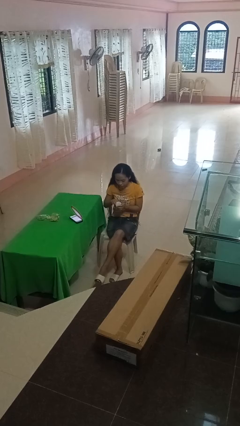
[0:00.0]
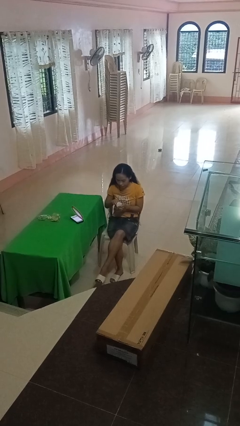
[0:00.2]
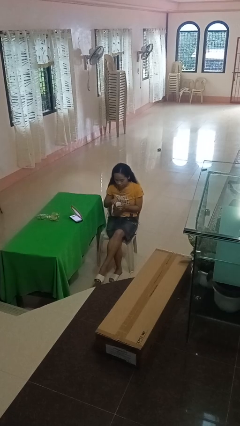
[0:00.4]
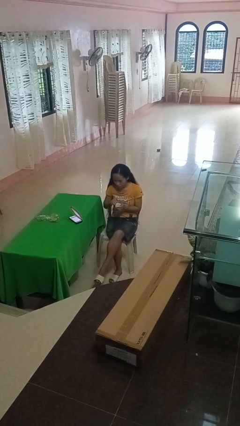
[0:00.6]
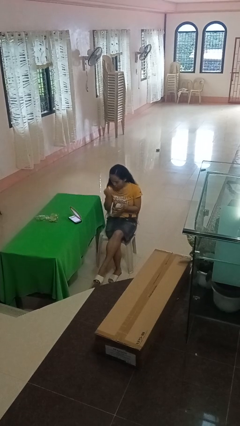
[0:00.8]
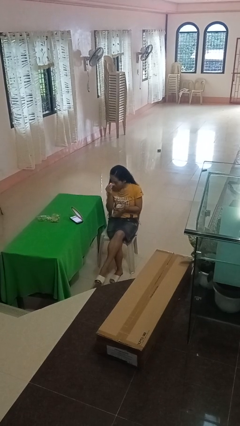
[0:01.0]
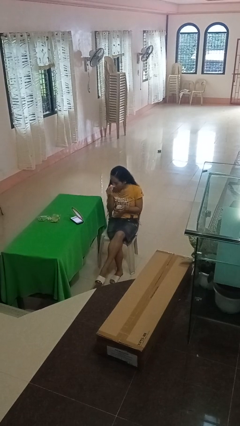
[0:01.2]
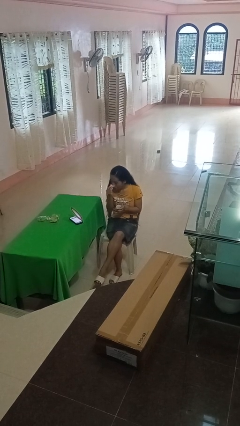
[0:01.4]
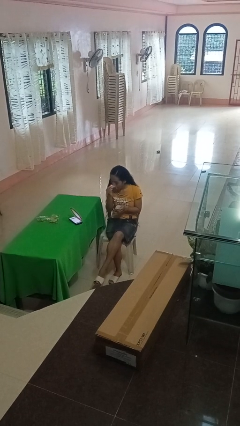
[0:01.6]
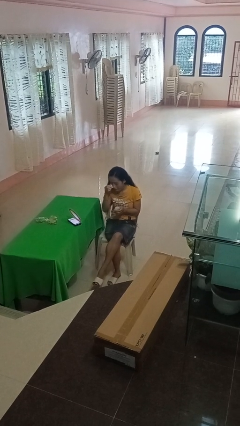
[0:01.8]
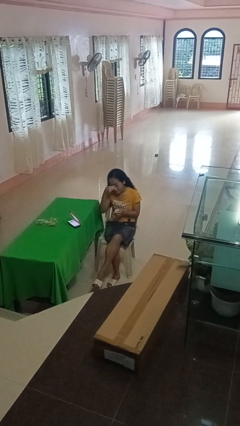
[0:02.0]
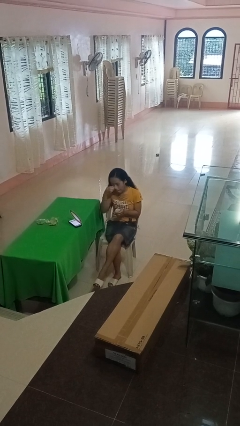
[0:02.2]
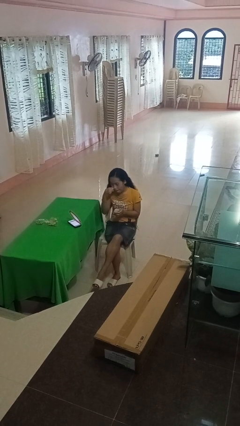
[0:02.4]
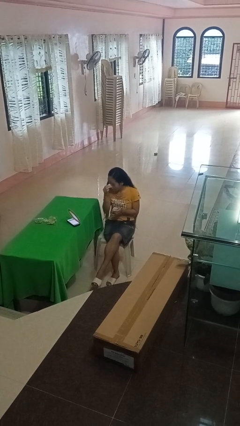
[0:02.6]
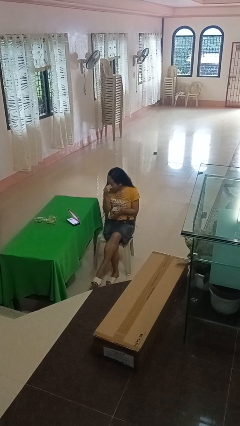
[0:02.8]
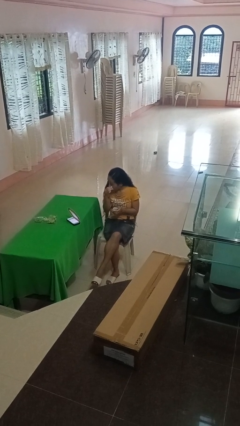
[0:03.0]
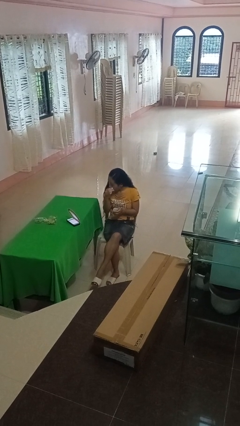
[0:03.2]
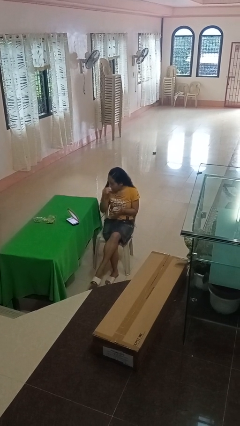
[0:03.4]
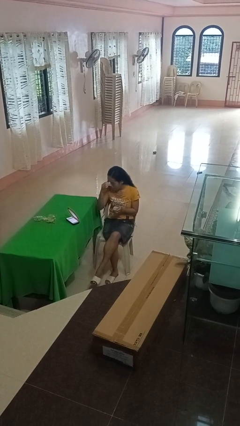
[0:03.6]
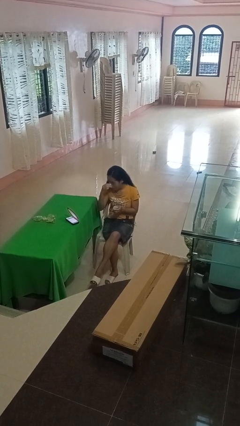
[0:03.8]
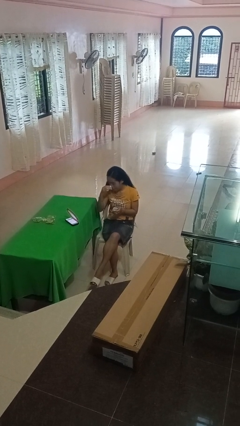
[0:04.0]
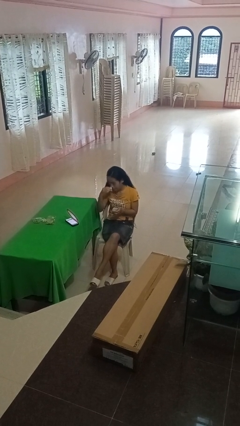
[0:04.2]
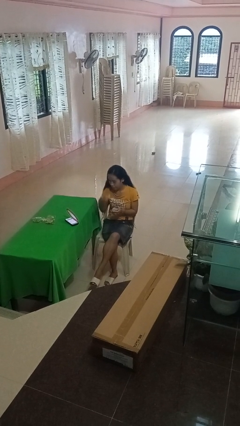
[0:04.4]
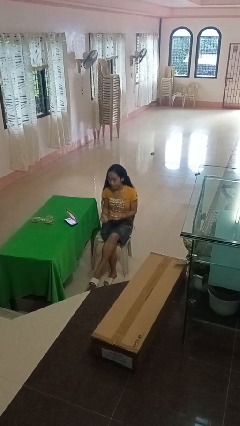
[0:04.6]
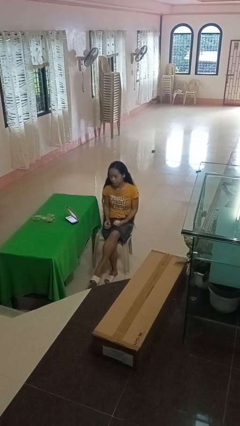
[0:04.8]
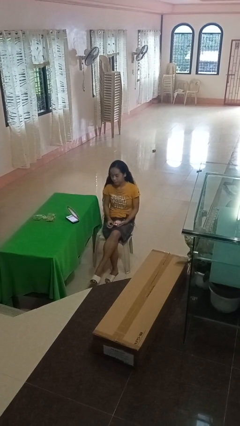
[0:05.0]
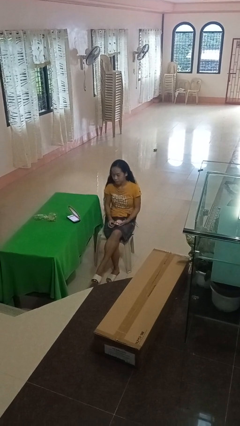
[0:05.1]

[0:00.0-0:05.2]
person applies foundation makeup

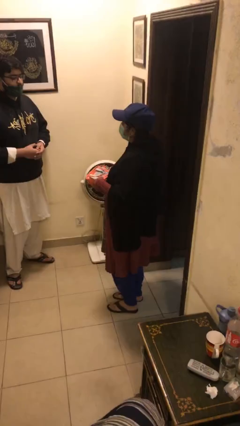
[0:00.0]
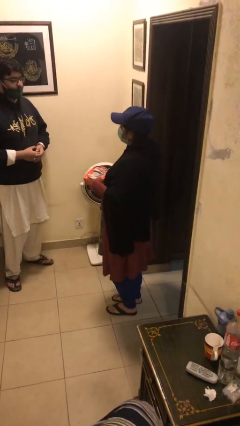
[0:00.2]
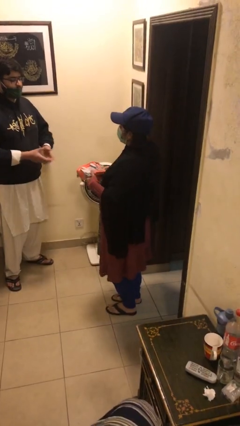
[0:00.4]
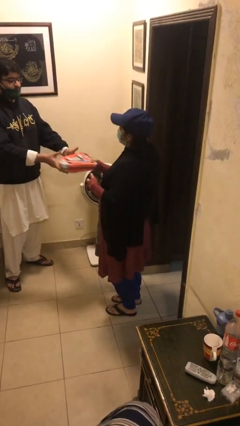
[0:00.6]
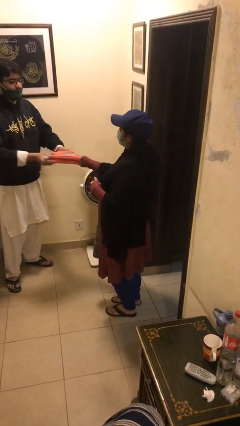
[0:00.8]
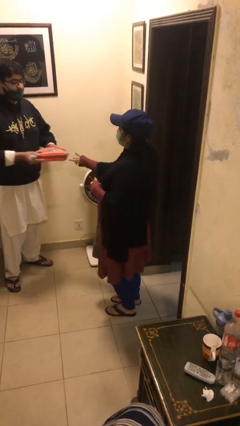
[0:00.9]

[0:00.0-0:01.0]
person transfers object to person

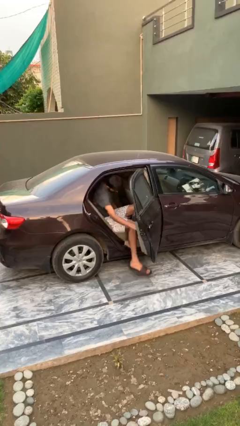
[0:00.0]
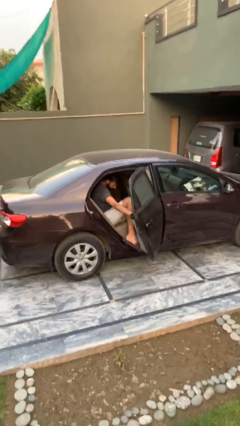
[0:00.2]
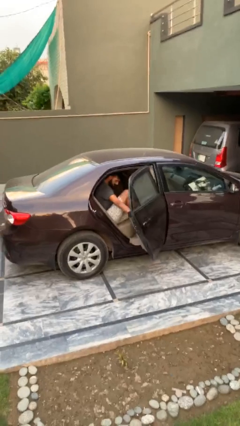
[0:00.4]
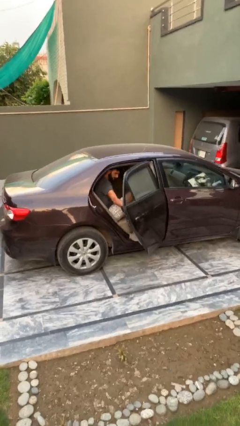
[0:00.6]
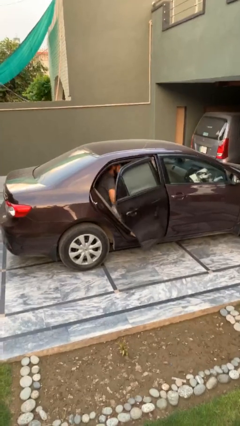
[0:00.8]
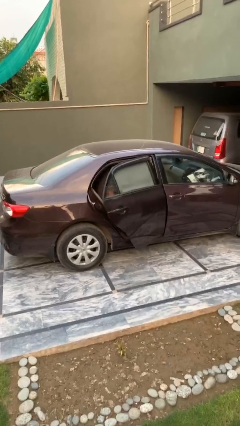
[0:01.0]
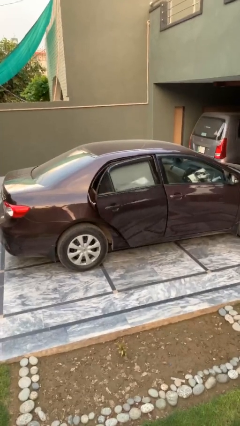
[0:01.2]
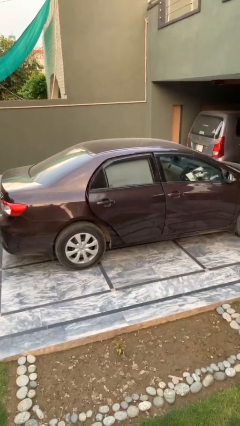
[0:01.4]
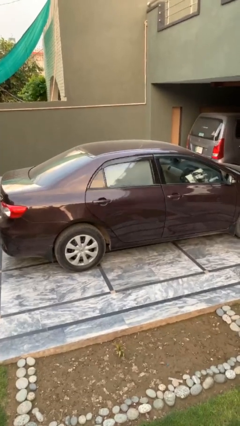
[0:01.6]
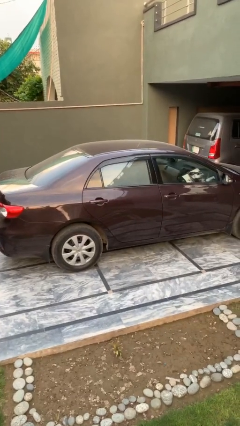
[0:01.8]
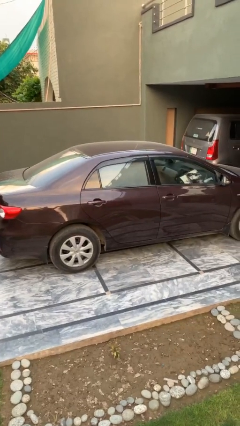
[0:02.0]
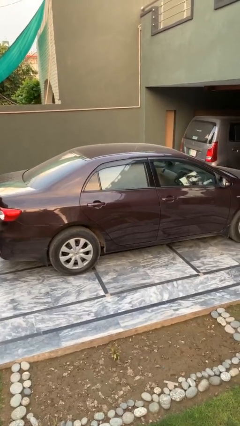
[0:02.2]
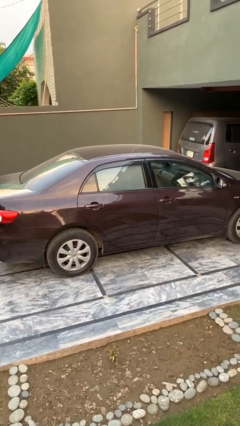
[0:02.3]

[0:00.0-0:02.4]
person closes car door

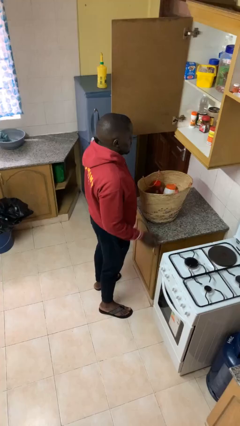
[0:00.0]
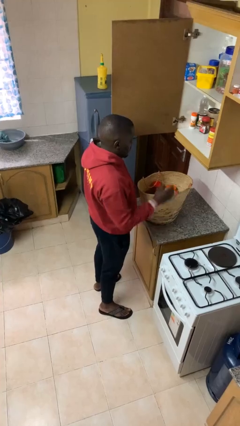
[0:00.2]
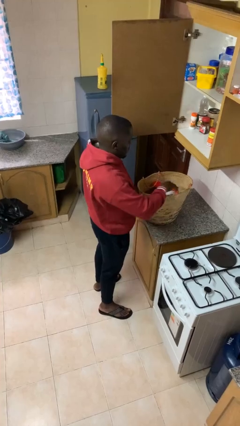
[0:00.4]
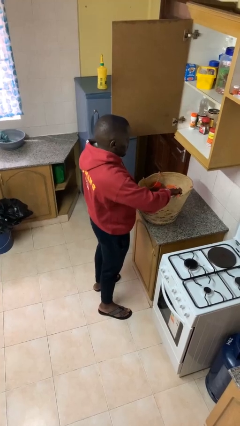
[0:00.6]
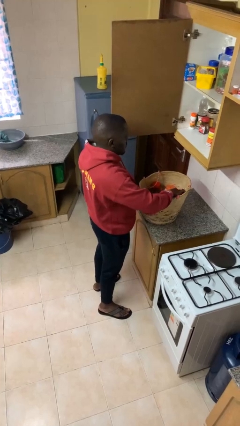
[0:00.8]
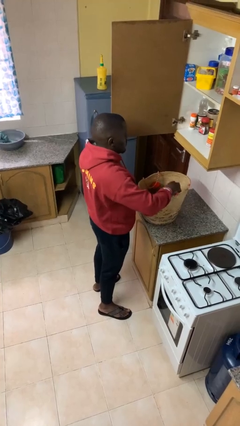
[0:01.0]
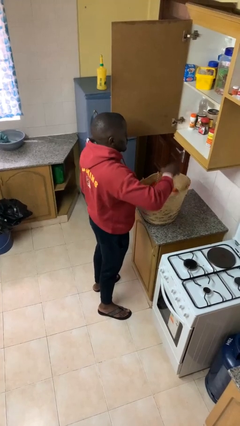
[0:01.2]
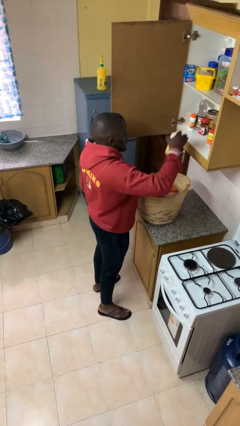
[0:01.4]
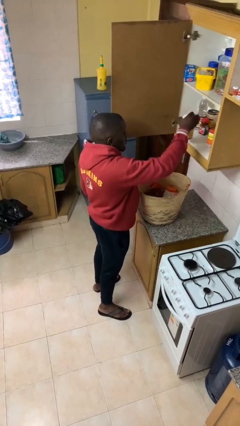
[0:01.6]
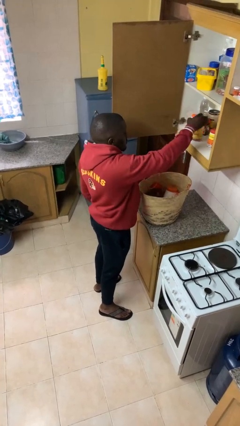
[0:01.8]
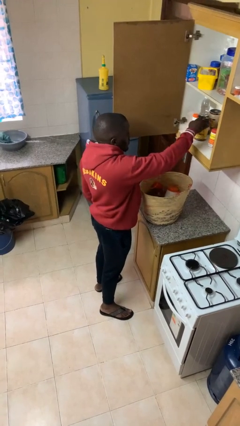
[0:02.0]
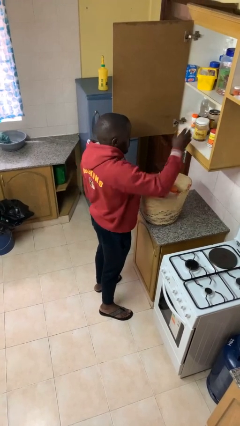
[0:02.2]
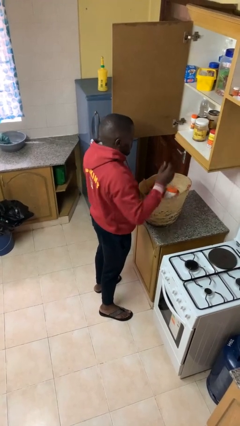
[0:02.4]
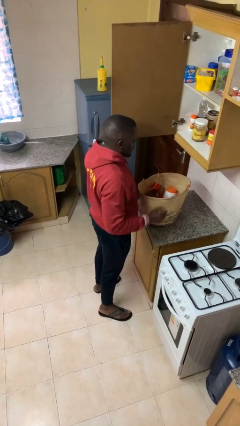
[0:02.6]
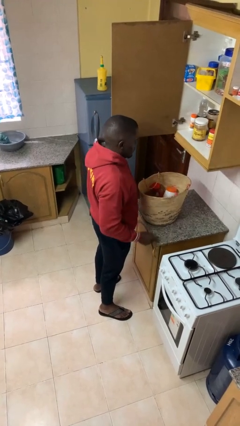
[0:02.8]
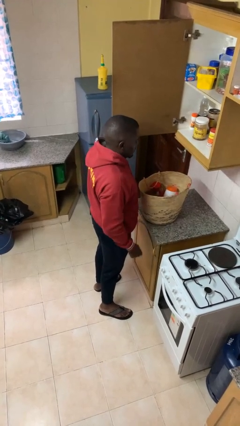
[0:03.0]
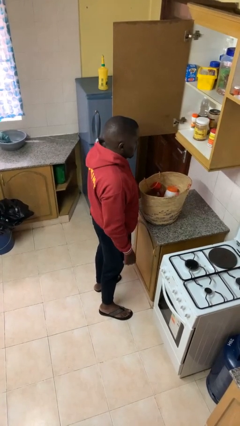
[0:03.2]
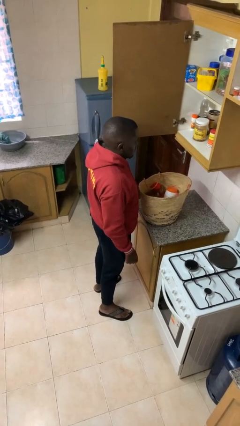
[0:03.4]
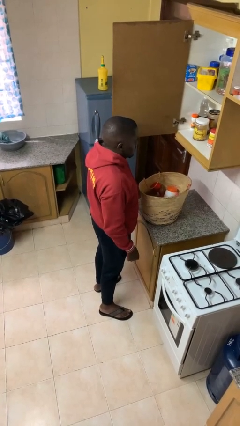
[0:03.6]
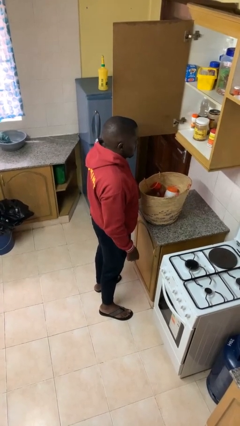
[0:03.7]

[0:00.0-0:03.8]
person loads groceries into cabinet

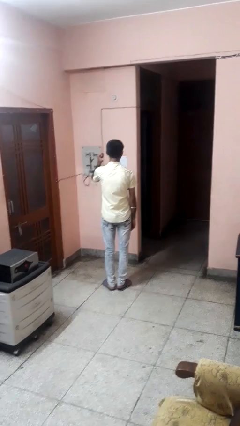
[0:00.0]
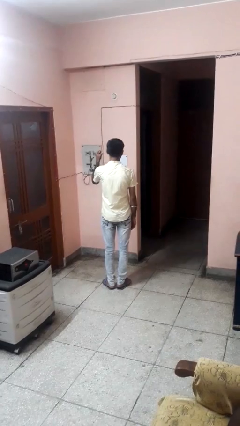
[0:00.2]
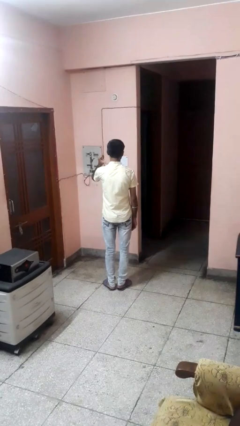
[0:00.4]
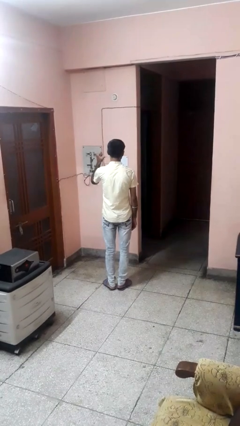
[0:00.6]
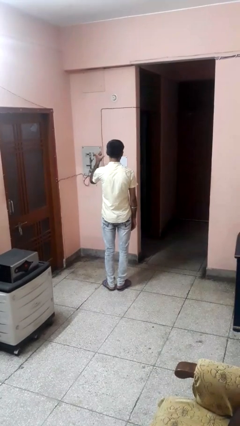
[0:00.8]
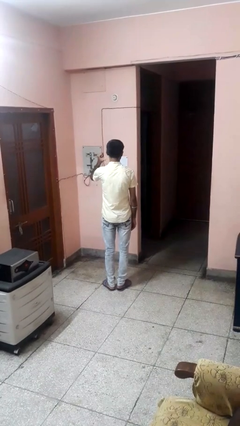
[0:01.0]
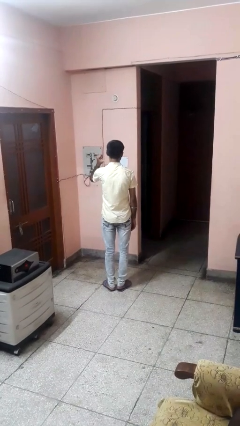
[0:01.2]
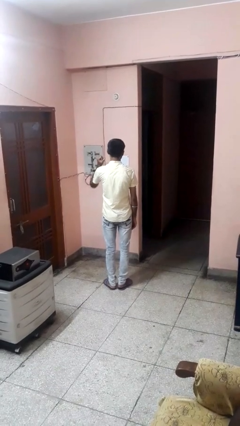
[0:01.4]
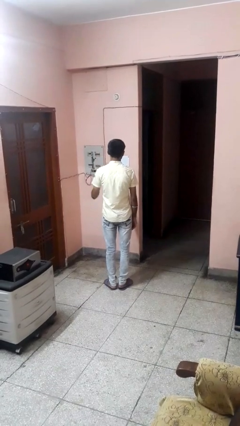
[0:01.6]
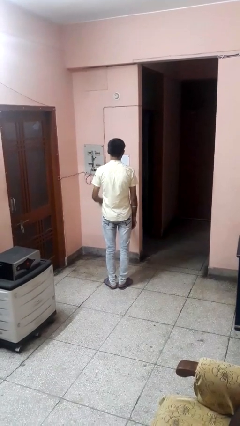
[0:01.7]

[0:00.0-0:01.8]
person gestures behind me

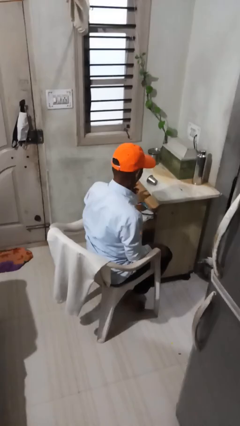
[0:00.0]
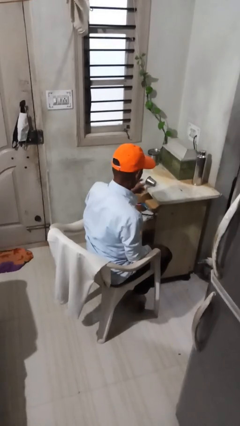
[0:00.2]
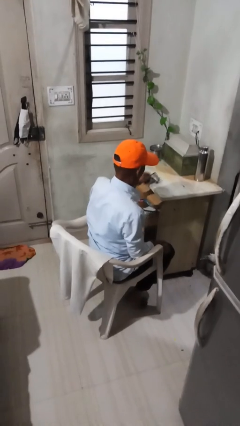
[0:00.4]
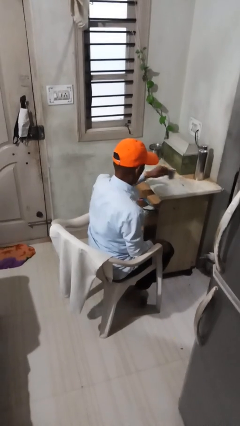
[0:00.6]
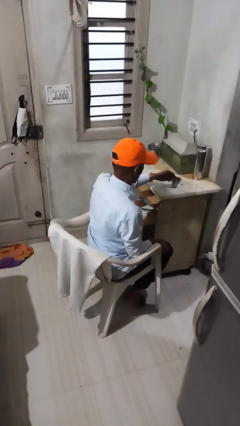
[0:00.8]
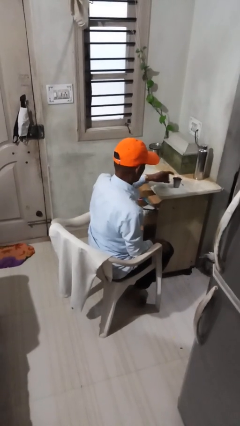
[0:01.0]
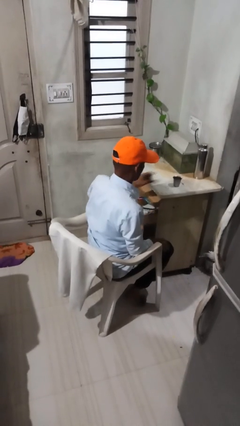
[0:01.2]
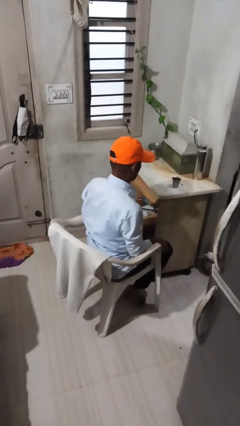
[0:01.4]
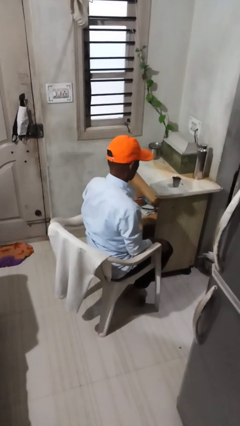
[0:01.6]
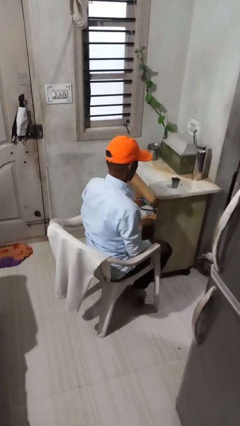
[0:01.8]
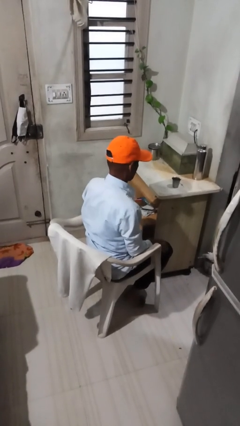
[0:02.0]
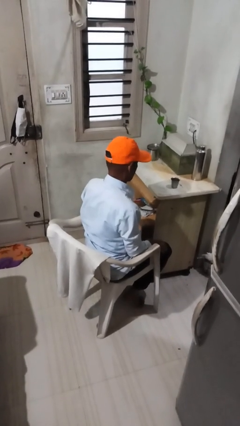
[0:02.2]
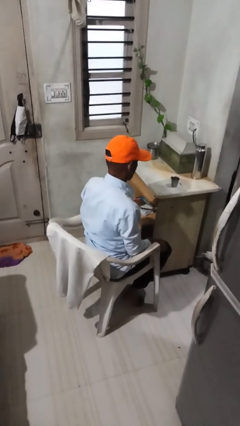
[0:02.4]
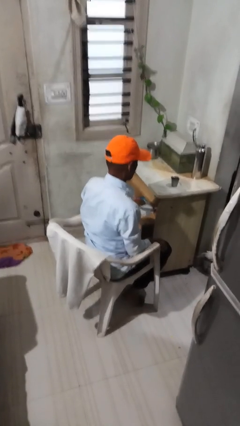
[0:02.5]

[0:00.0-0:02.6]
person sets upright glass

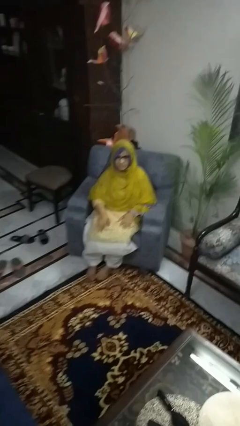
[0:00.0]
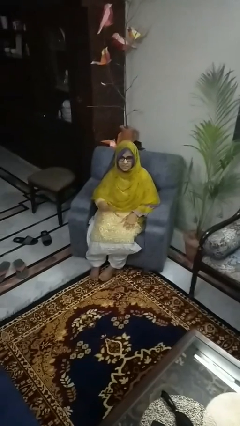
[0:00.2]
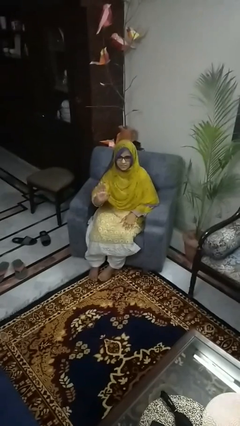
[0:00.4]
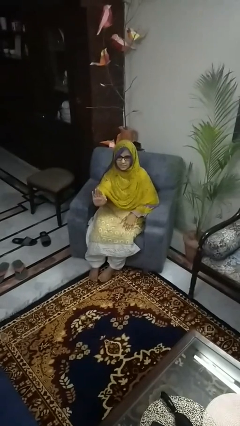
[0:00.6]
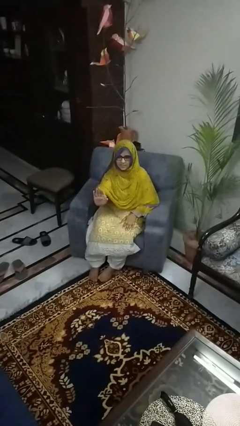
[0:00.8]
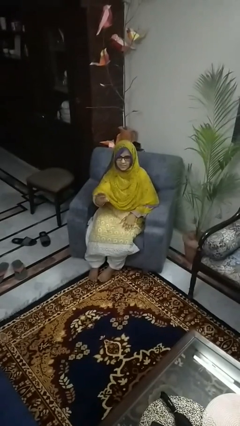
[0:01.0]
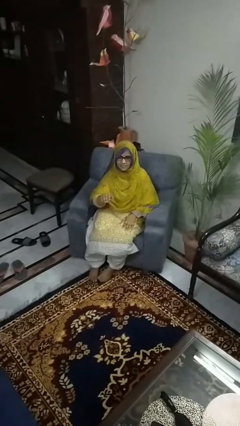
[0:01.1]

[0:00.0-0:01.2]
person gestures stop
